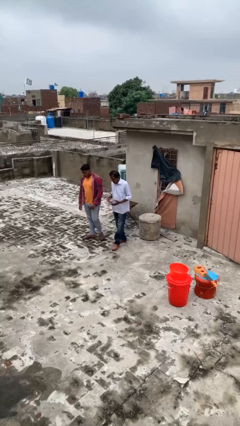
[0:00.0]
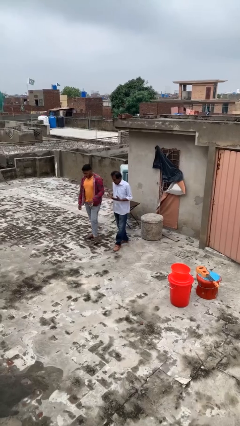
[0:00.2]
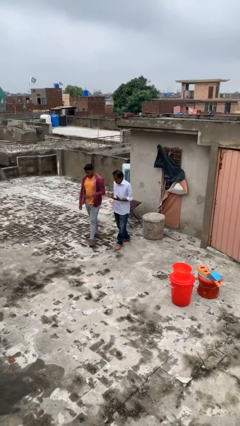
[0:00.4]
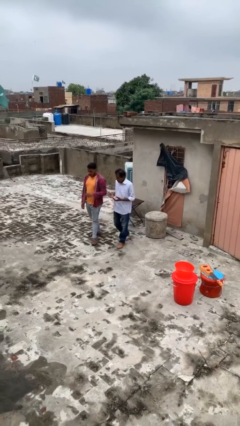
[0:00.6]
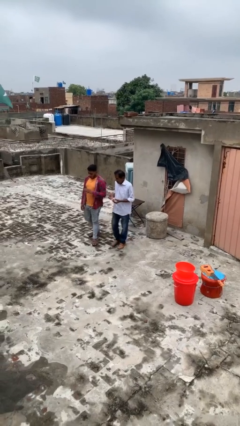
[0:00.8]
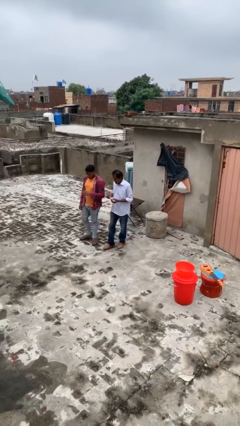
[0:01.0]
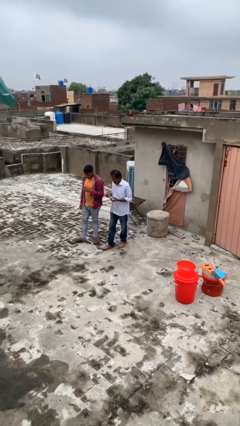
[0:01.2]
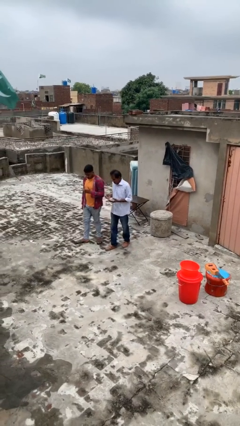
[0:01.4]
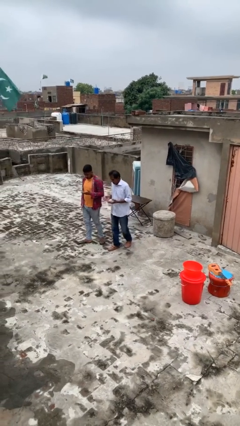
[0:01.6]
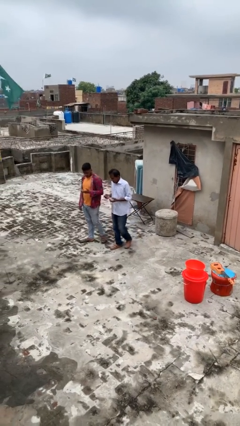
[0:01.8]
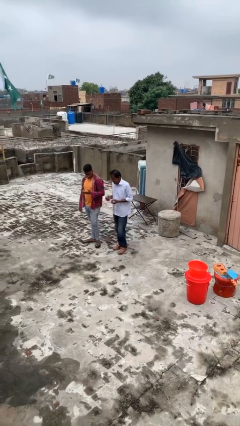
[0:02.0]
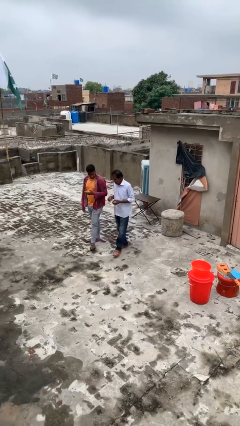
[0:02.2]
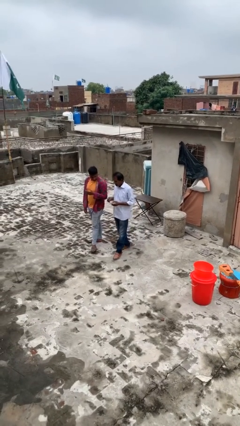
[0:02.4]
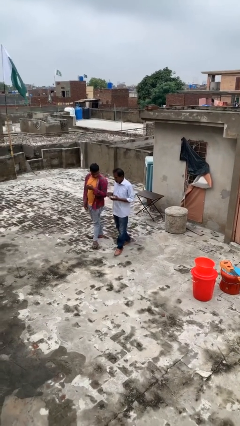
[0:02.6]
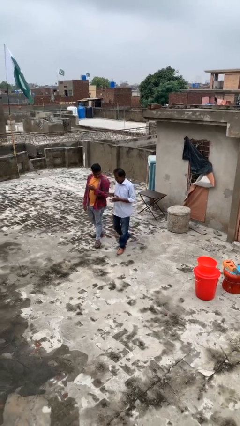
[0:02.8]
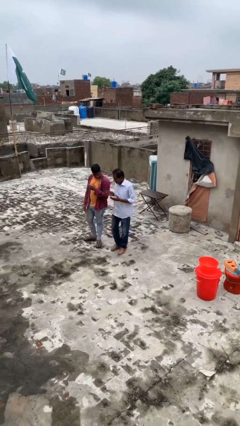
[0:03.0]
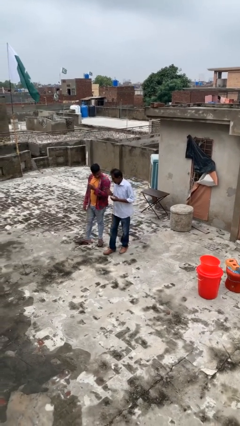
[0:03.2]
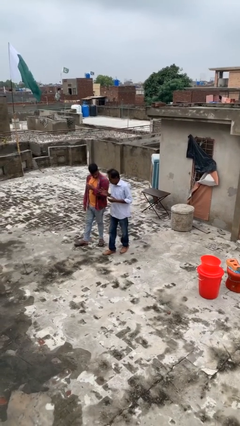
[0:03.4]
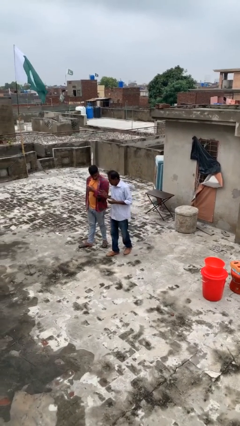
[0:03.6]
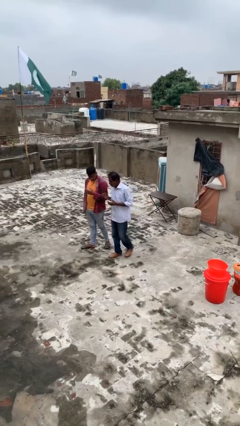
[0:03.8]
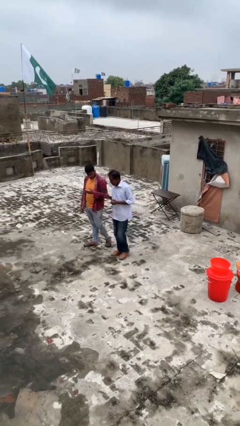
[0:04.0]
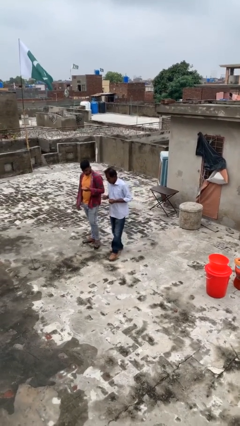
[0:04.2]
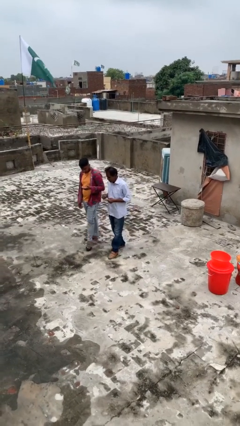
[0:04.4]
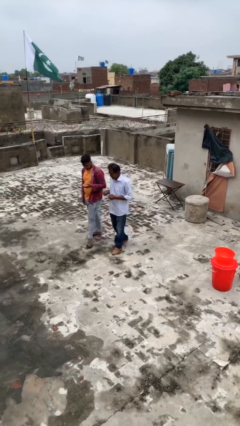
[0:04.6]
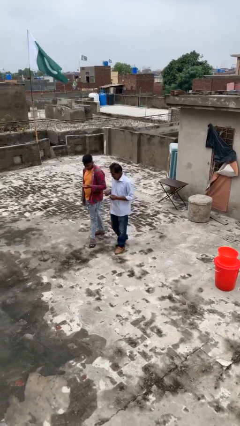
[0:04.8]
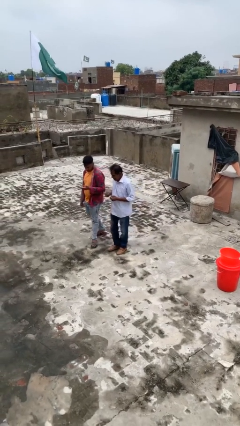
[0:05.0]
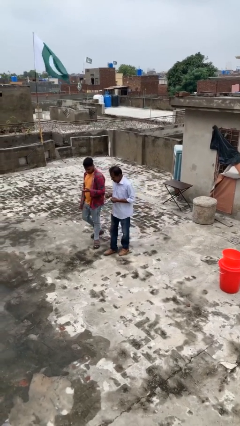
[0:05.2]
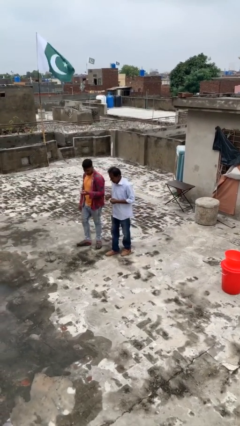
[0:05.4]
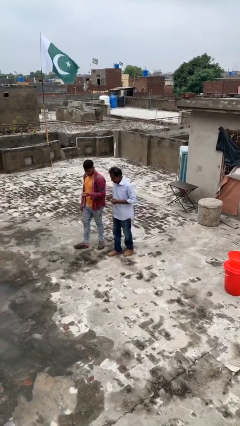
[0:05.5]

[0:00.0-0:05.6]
person talks to person

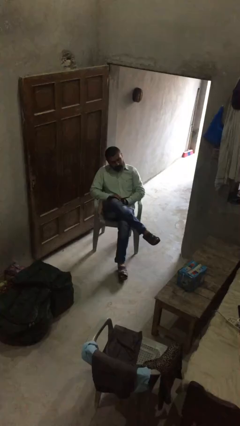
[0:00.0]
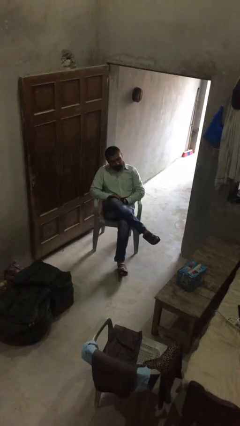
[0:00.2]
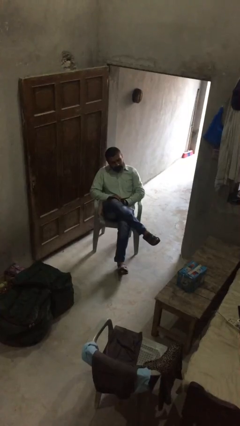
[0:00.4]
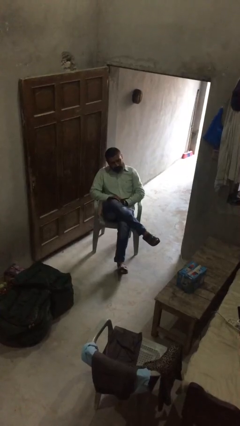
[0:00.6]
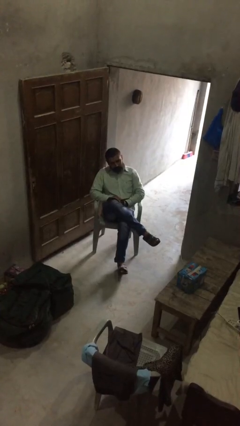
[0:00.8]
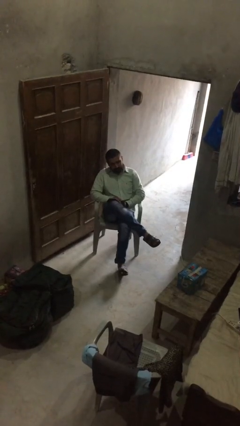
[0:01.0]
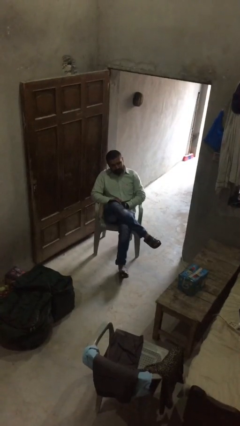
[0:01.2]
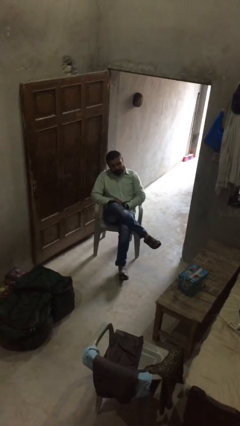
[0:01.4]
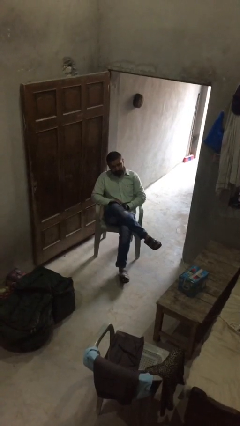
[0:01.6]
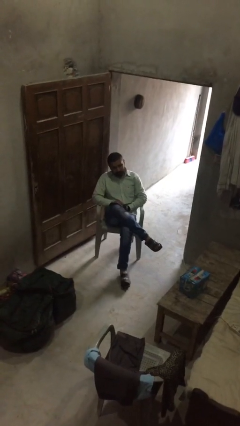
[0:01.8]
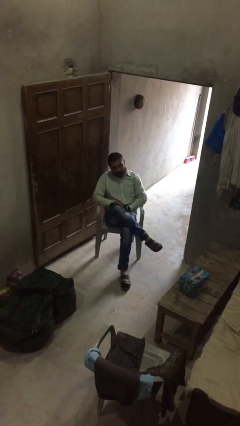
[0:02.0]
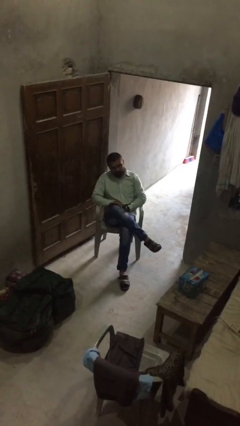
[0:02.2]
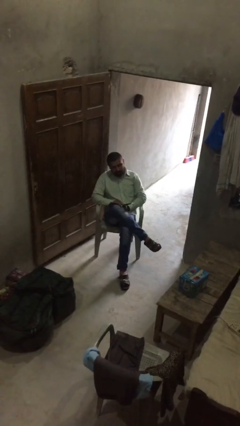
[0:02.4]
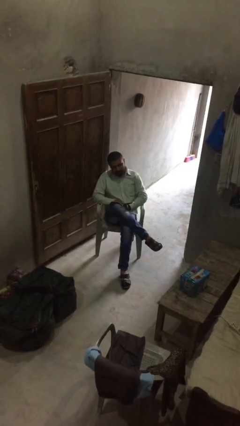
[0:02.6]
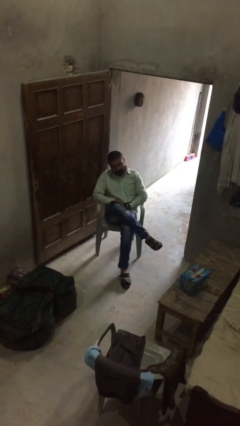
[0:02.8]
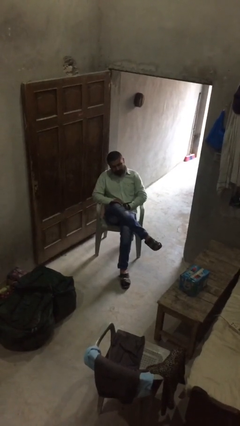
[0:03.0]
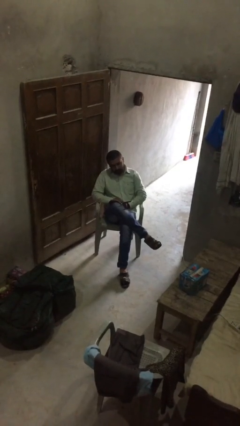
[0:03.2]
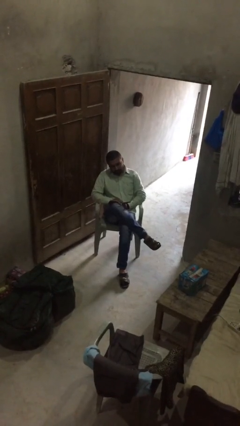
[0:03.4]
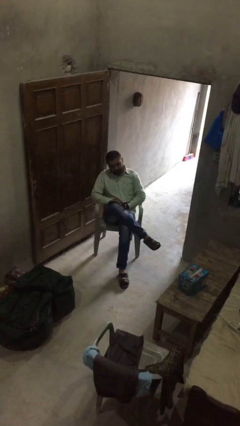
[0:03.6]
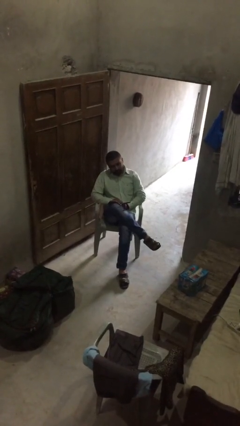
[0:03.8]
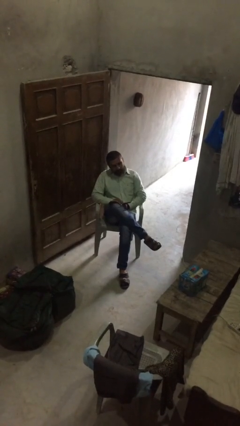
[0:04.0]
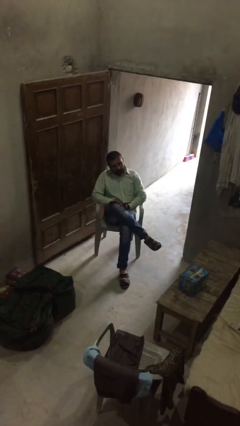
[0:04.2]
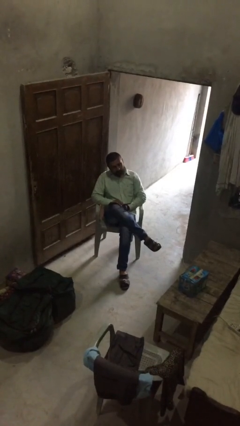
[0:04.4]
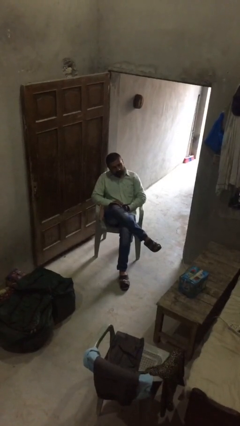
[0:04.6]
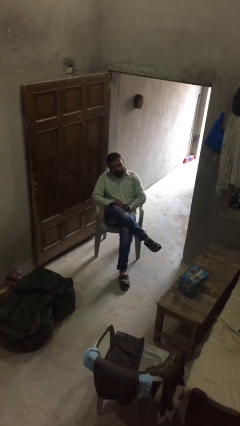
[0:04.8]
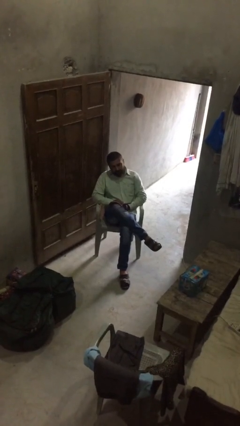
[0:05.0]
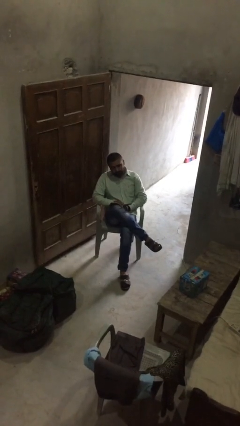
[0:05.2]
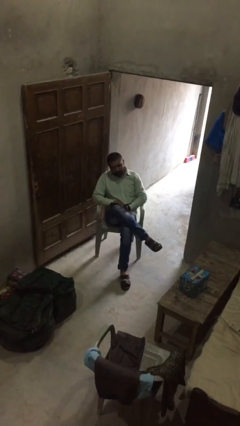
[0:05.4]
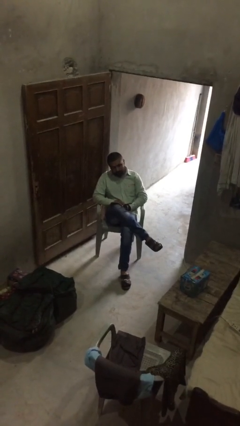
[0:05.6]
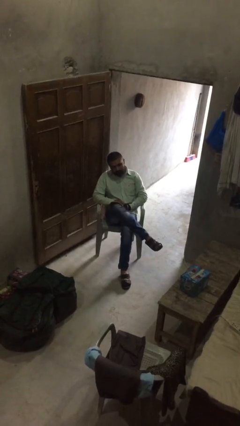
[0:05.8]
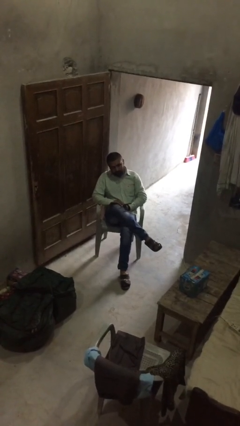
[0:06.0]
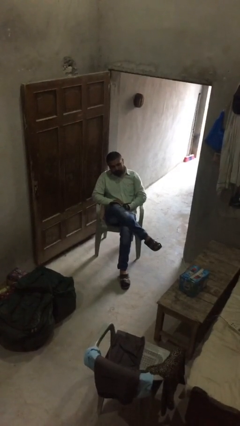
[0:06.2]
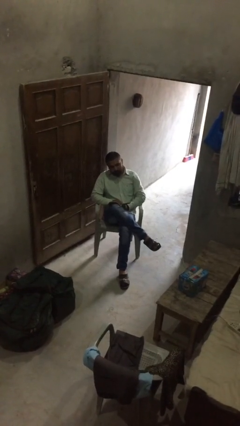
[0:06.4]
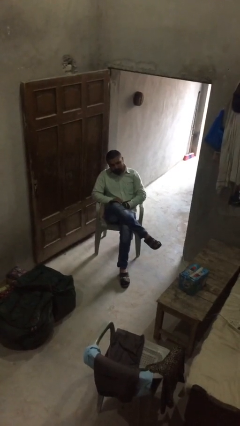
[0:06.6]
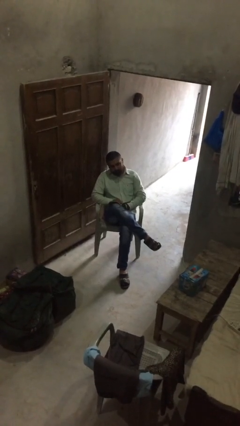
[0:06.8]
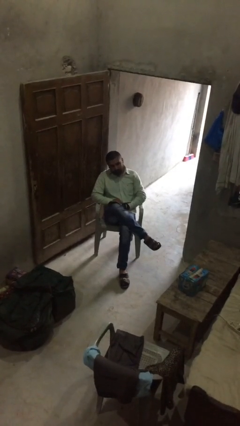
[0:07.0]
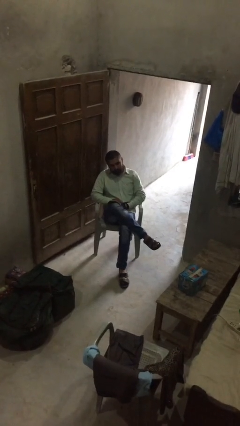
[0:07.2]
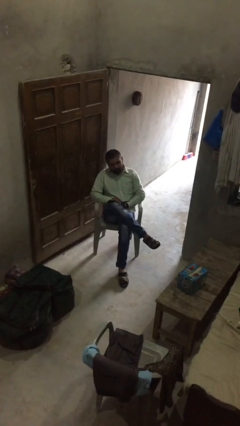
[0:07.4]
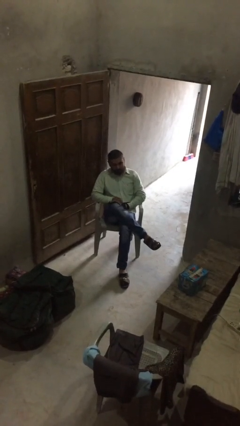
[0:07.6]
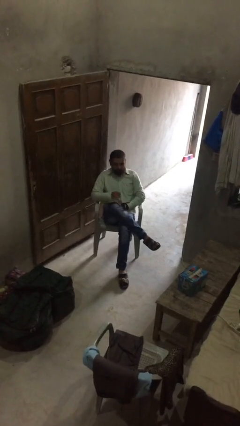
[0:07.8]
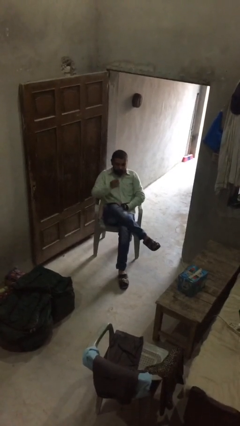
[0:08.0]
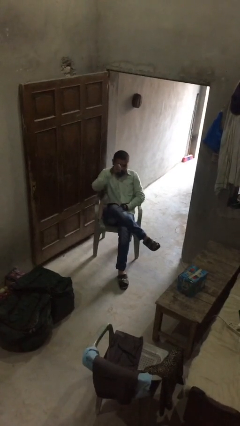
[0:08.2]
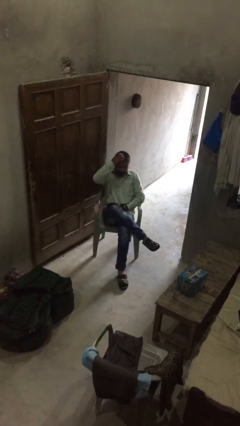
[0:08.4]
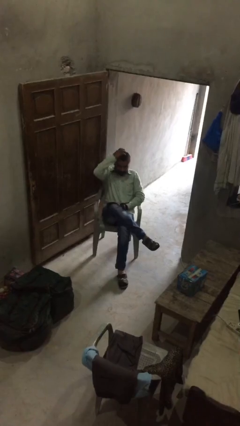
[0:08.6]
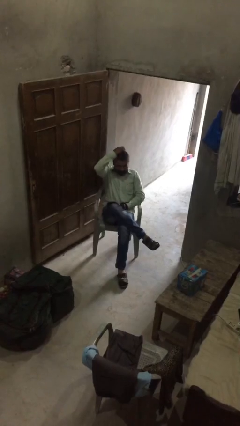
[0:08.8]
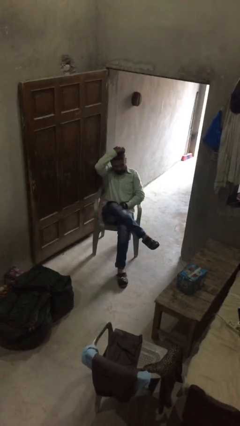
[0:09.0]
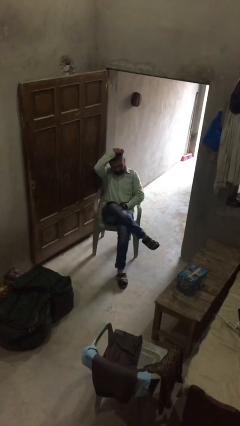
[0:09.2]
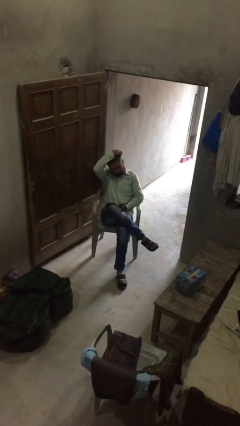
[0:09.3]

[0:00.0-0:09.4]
person reads document

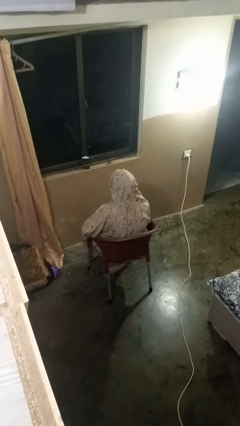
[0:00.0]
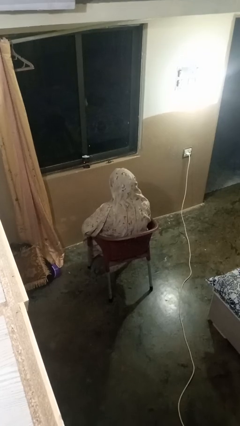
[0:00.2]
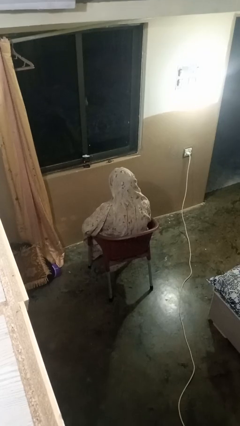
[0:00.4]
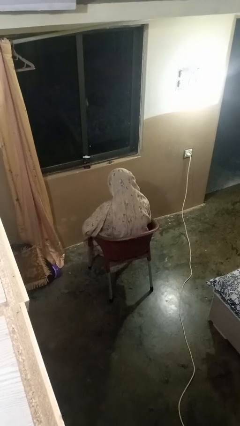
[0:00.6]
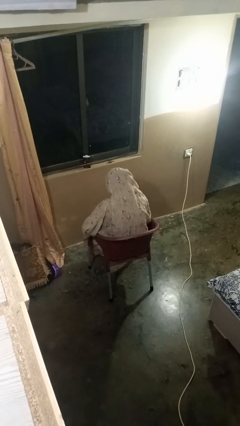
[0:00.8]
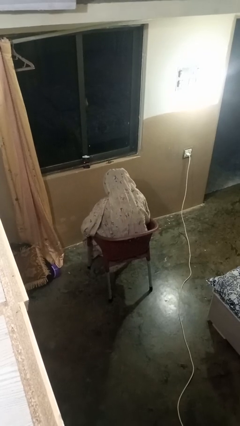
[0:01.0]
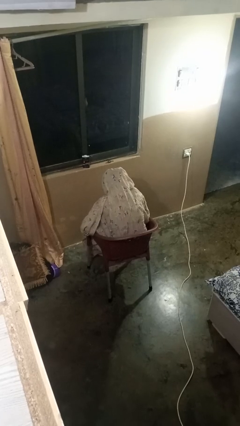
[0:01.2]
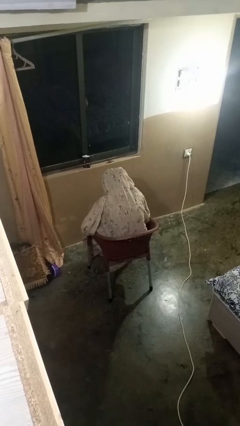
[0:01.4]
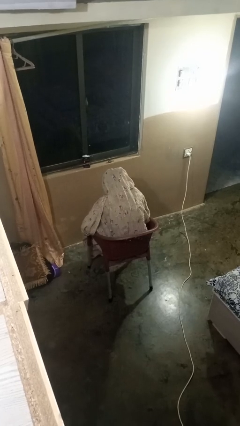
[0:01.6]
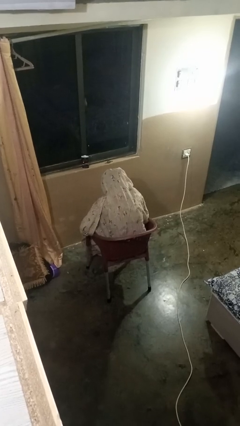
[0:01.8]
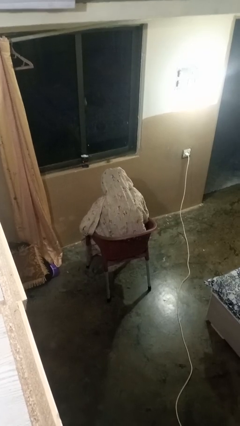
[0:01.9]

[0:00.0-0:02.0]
person looks at hands in lap

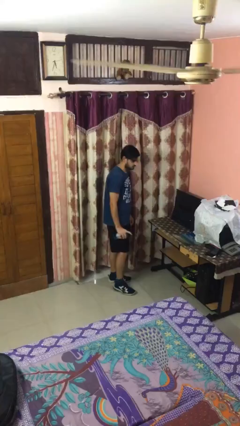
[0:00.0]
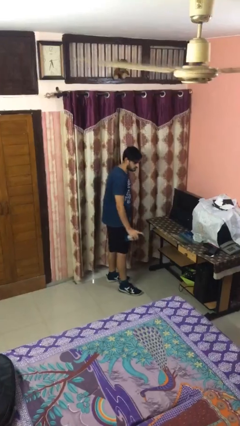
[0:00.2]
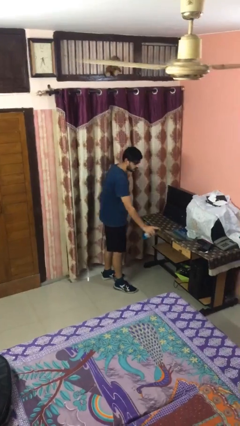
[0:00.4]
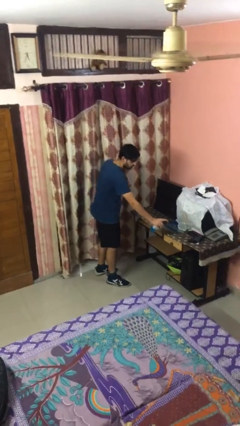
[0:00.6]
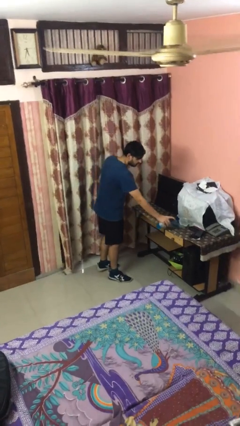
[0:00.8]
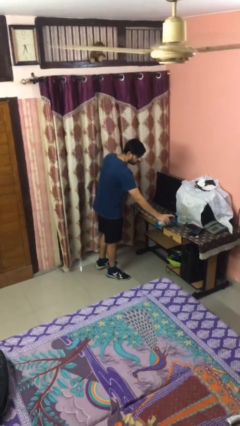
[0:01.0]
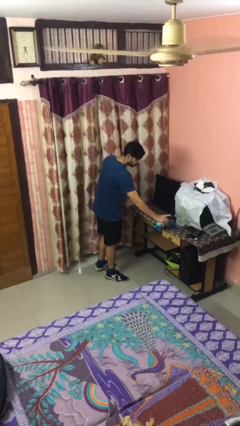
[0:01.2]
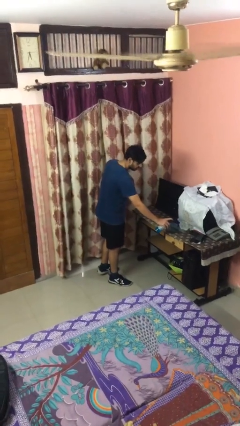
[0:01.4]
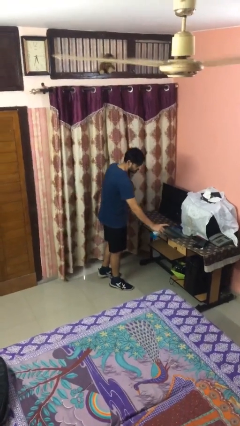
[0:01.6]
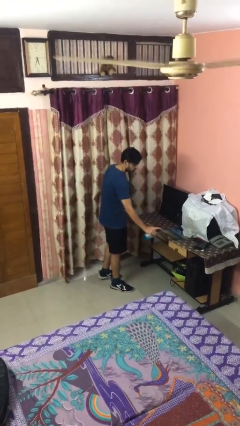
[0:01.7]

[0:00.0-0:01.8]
person sprays from bottle
